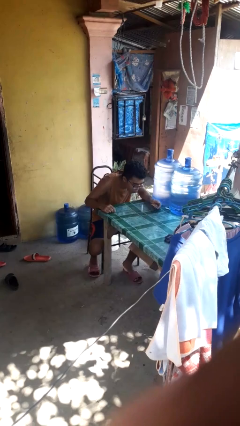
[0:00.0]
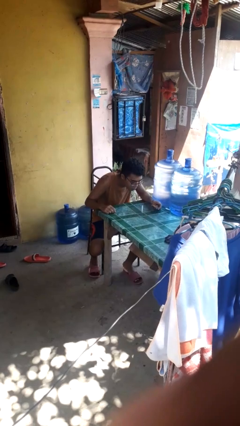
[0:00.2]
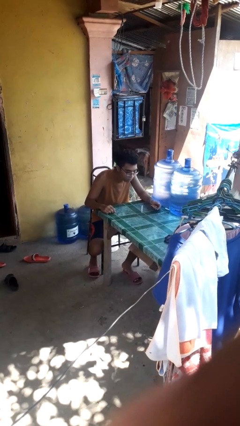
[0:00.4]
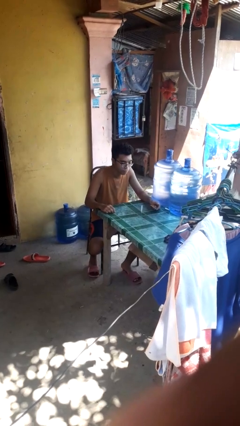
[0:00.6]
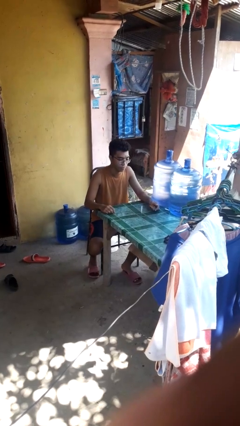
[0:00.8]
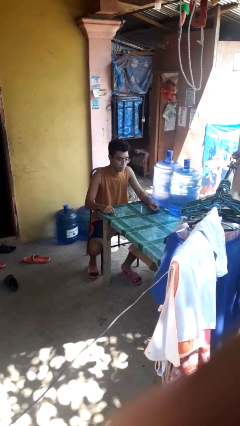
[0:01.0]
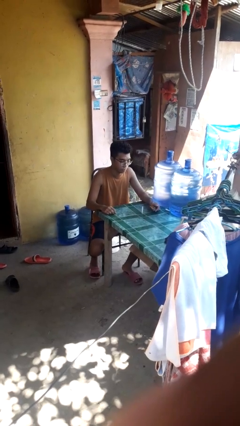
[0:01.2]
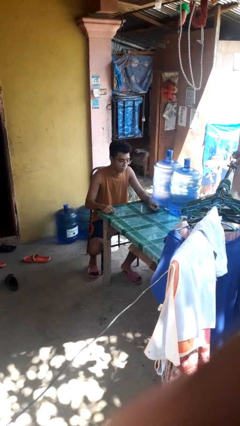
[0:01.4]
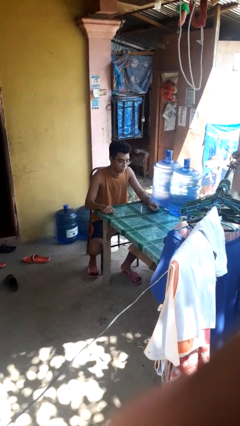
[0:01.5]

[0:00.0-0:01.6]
person extinguishes candle

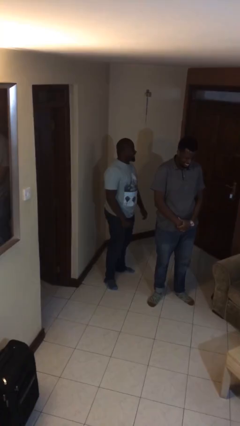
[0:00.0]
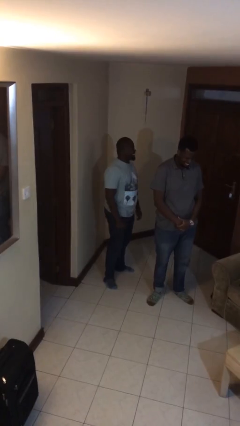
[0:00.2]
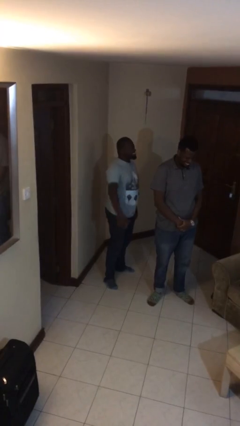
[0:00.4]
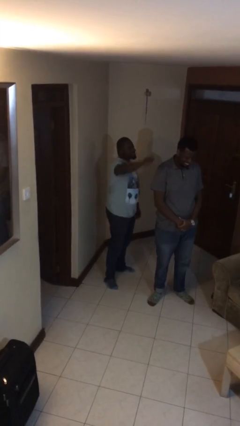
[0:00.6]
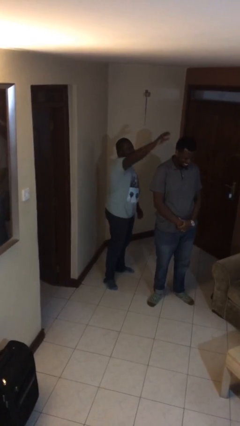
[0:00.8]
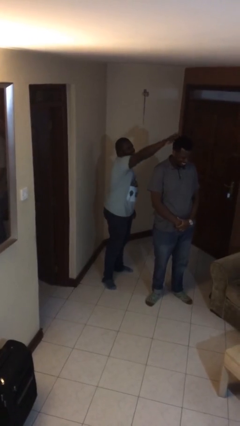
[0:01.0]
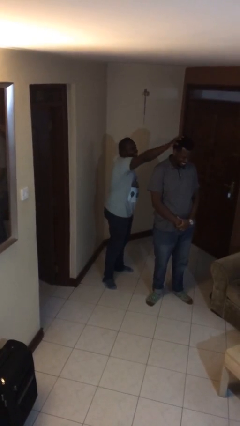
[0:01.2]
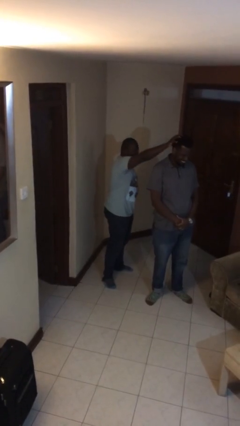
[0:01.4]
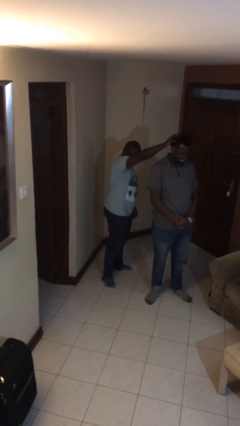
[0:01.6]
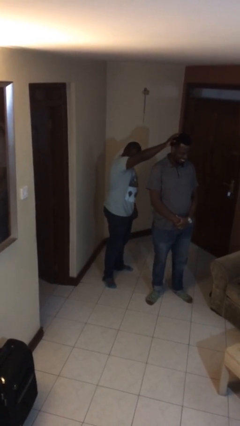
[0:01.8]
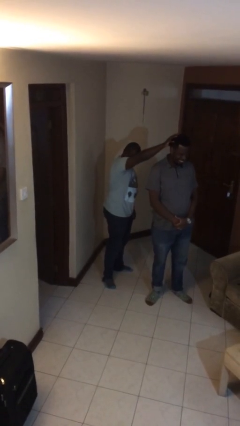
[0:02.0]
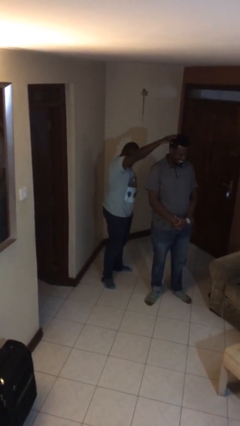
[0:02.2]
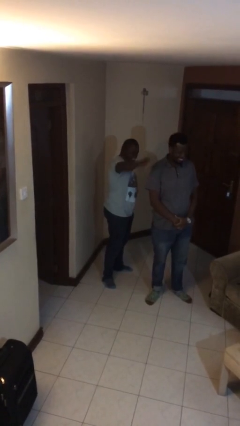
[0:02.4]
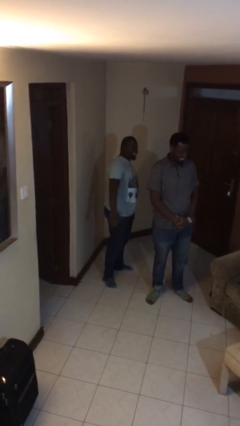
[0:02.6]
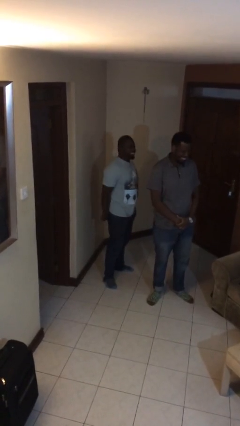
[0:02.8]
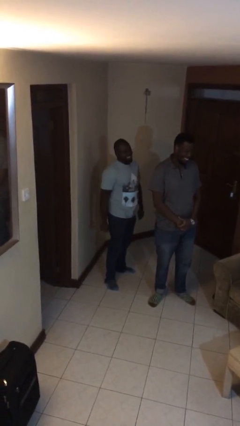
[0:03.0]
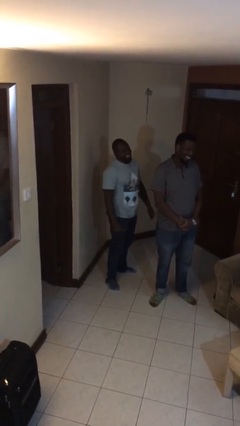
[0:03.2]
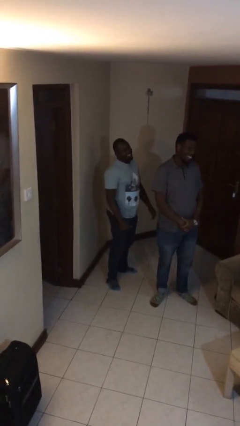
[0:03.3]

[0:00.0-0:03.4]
person grabs person by hair

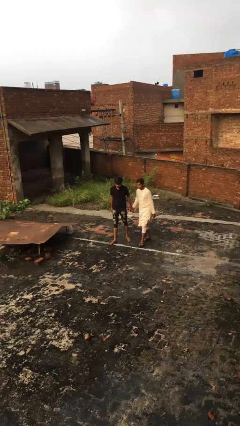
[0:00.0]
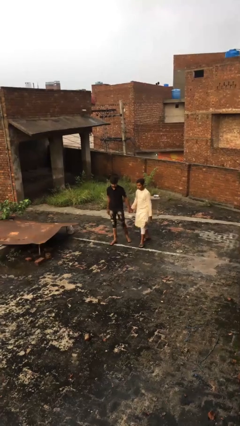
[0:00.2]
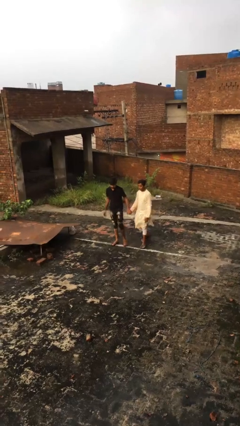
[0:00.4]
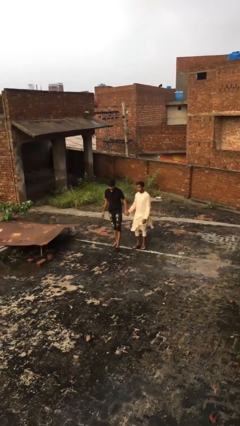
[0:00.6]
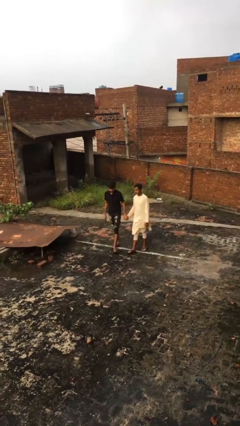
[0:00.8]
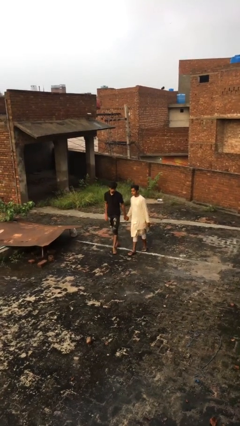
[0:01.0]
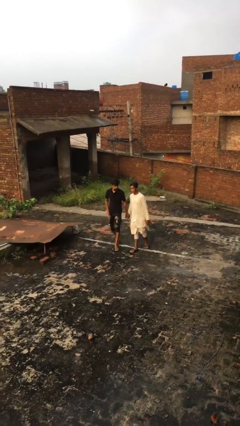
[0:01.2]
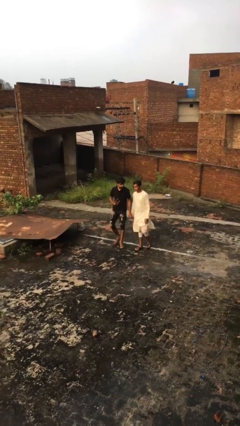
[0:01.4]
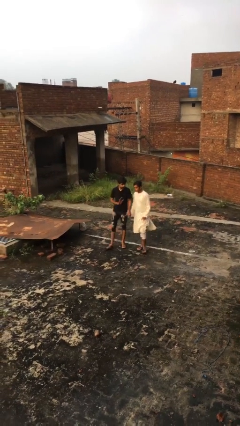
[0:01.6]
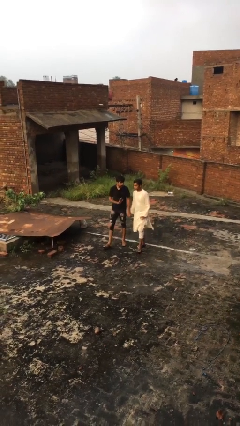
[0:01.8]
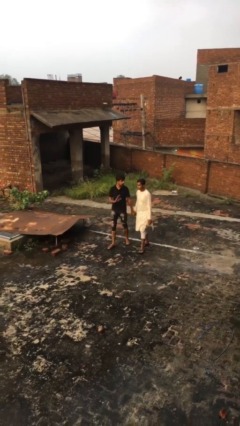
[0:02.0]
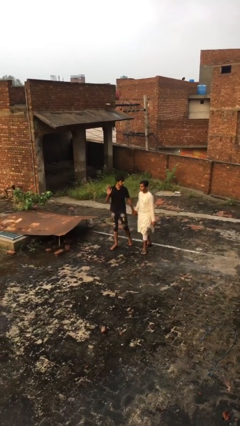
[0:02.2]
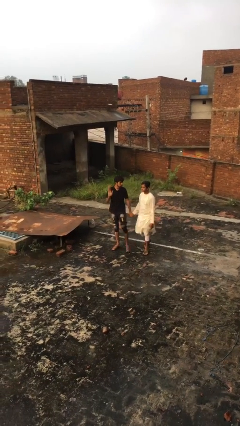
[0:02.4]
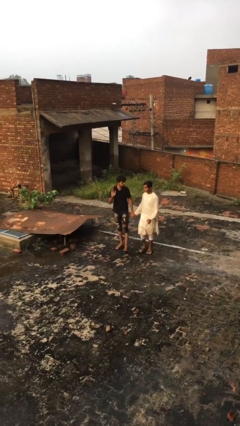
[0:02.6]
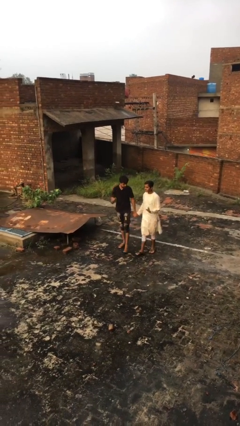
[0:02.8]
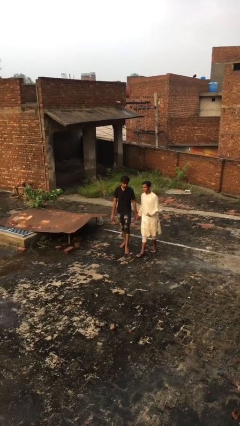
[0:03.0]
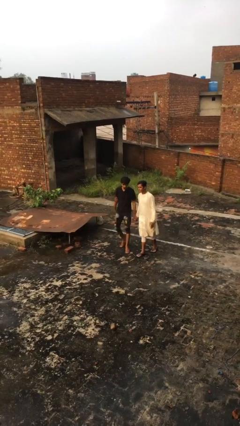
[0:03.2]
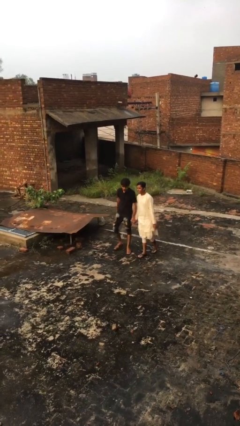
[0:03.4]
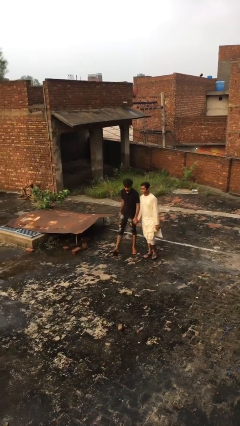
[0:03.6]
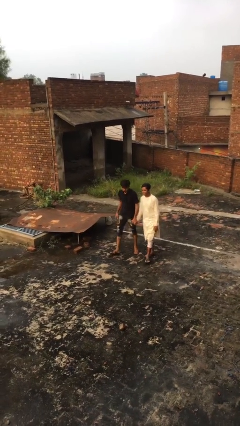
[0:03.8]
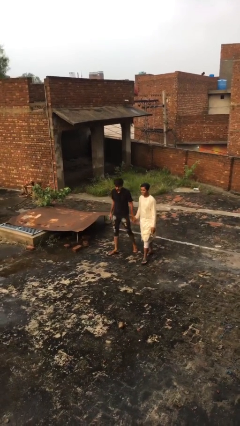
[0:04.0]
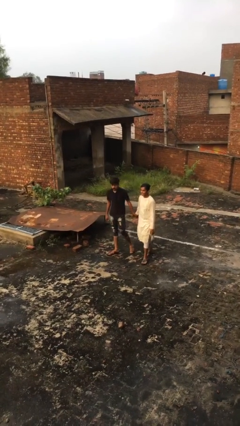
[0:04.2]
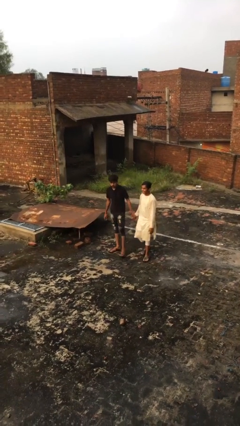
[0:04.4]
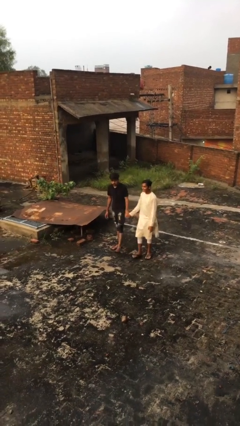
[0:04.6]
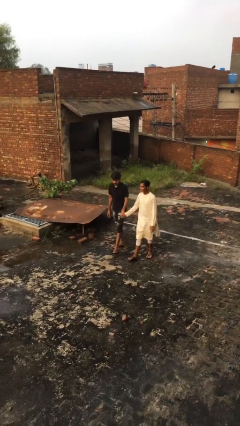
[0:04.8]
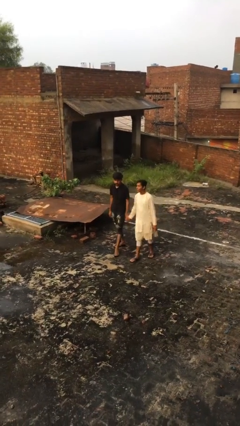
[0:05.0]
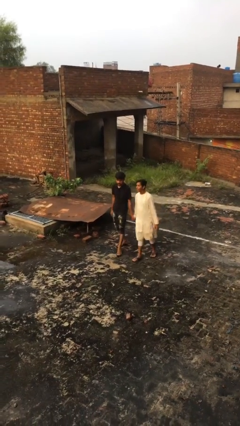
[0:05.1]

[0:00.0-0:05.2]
person holds hand

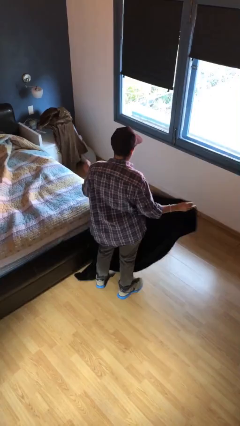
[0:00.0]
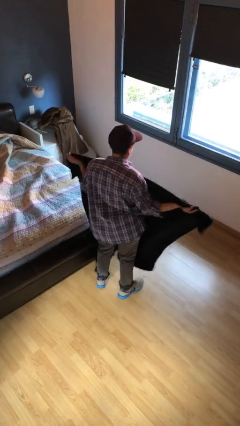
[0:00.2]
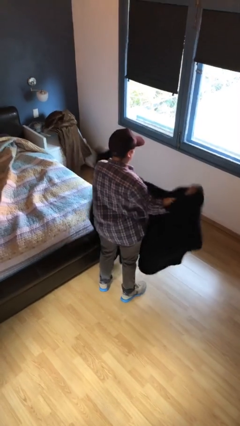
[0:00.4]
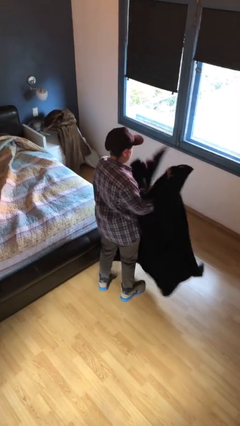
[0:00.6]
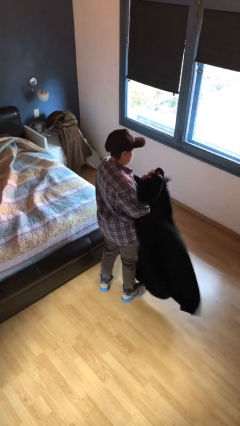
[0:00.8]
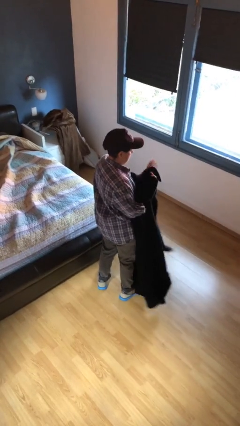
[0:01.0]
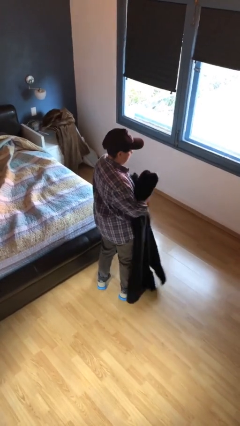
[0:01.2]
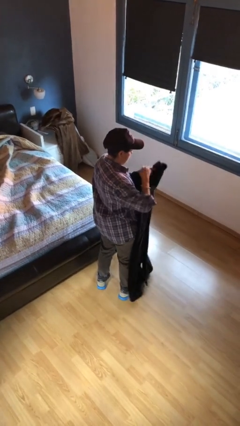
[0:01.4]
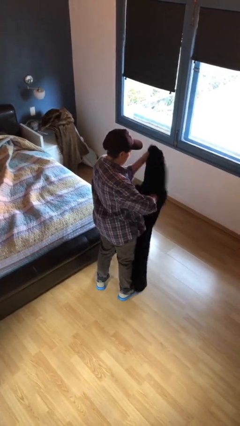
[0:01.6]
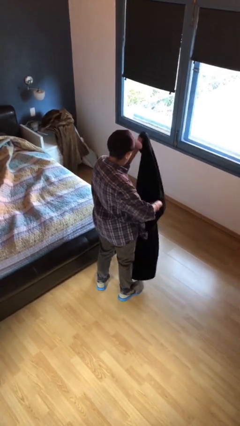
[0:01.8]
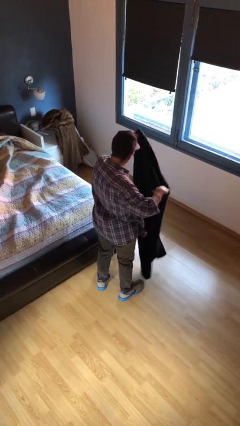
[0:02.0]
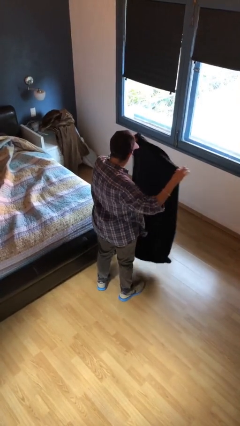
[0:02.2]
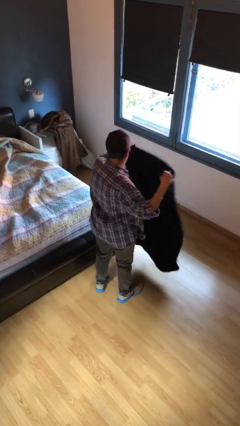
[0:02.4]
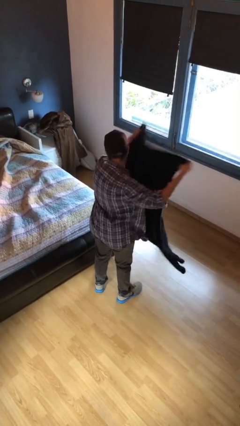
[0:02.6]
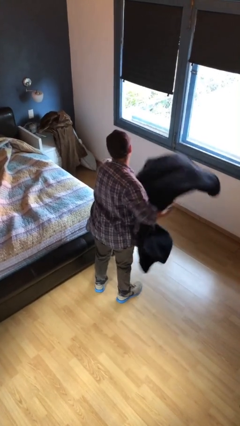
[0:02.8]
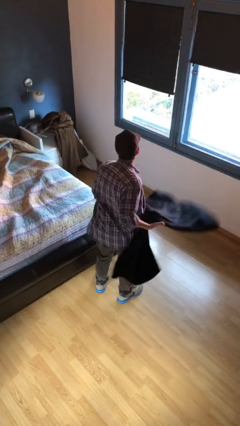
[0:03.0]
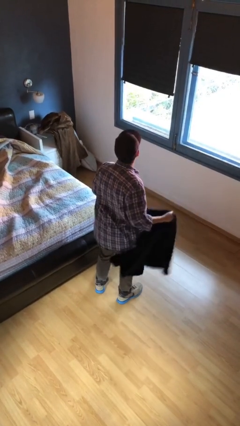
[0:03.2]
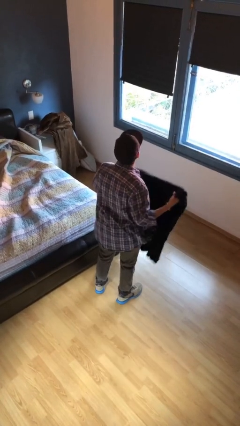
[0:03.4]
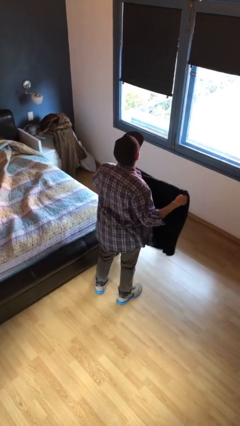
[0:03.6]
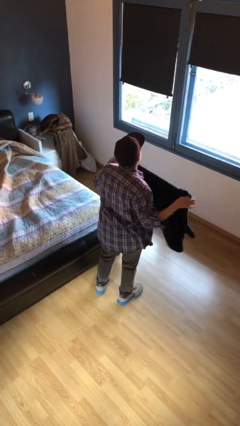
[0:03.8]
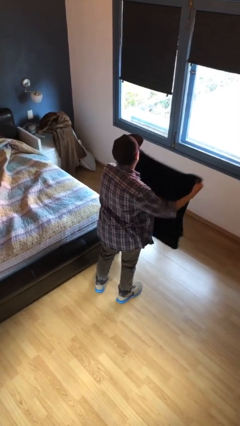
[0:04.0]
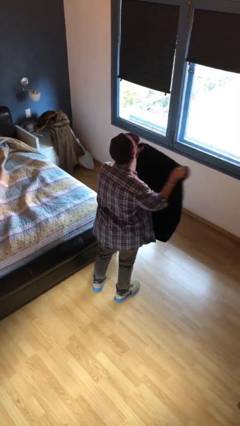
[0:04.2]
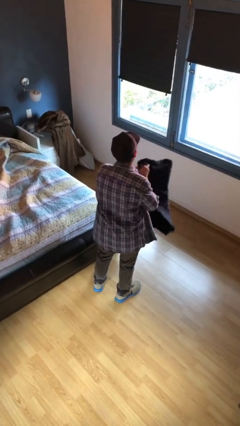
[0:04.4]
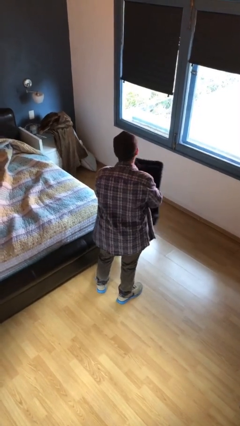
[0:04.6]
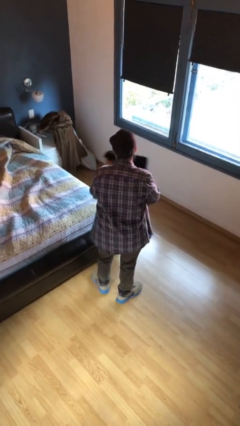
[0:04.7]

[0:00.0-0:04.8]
person folds blanket

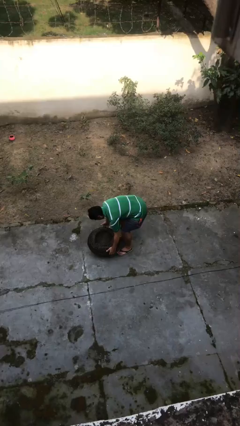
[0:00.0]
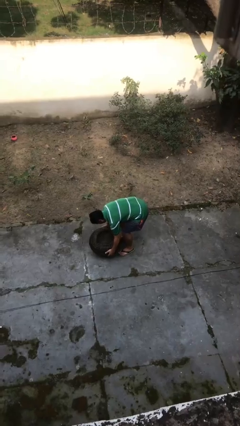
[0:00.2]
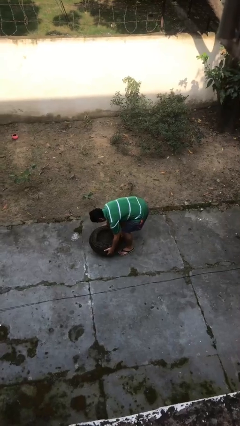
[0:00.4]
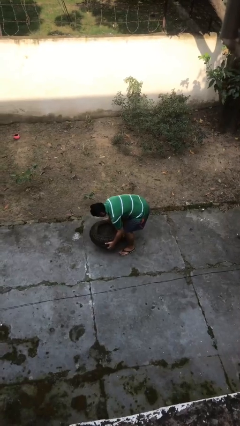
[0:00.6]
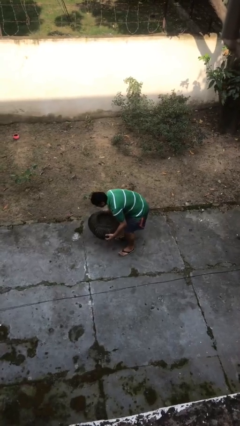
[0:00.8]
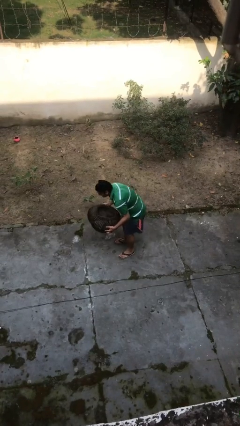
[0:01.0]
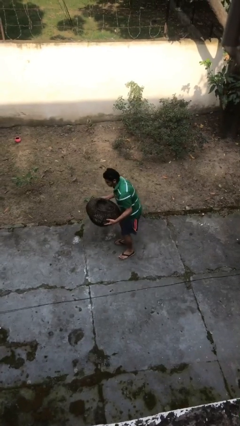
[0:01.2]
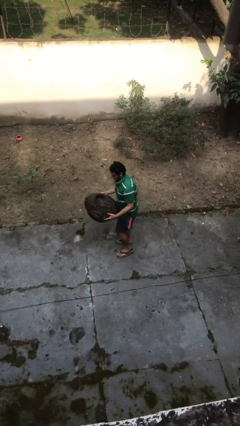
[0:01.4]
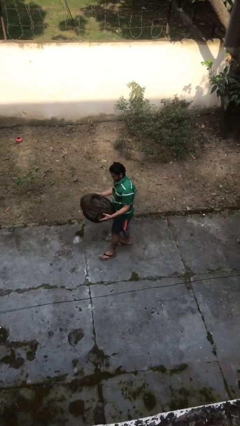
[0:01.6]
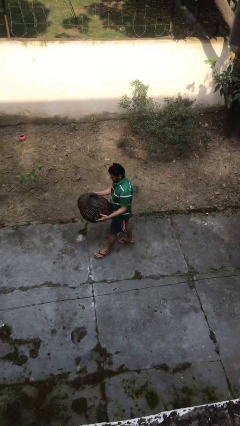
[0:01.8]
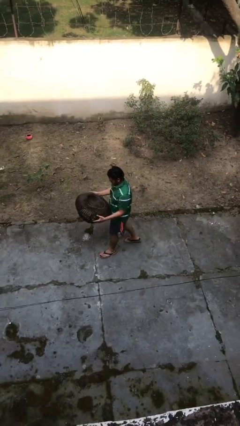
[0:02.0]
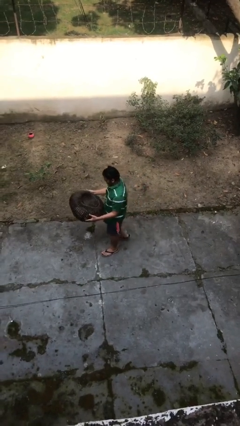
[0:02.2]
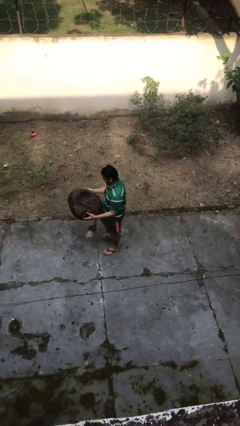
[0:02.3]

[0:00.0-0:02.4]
person picks up object from floor
